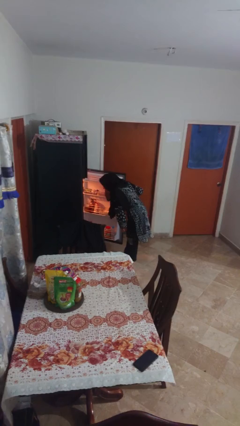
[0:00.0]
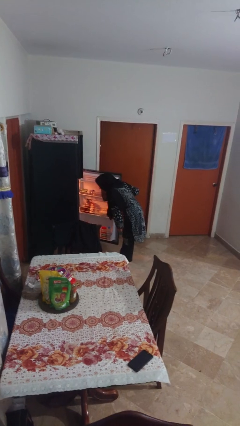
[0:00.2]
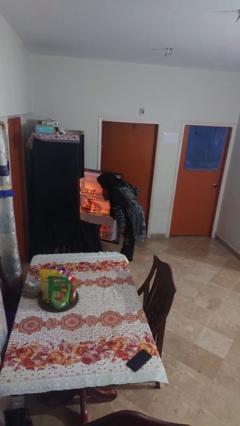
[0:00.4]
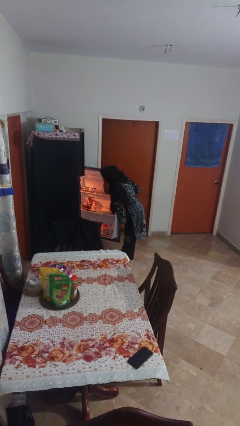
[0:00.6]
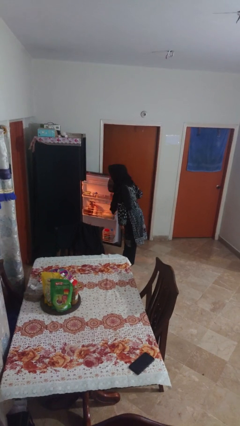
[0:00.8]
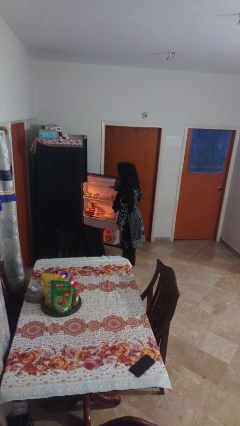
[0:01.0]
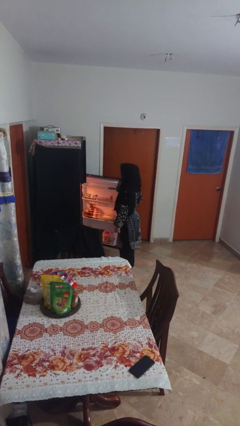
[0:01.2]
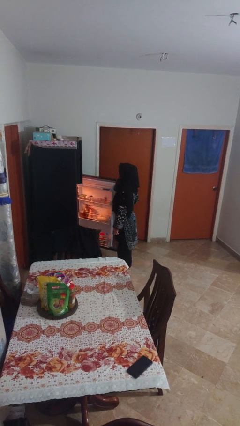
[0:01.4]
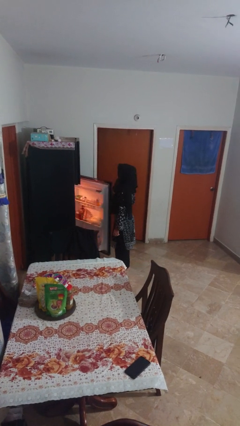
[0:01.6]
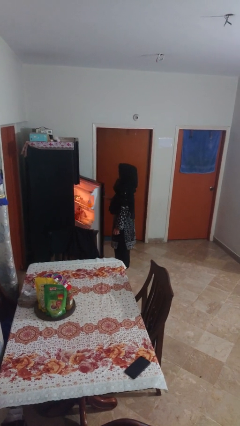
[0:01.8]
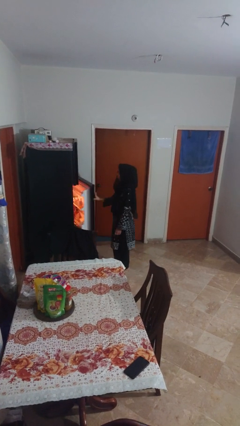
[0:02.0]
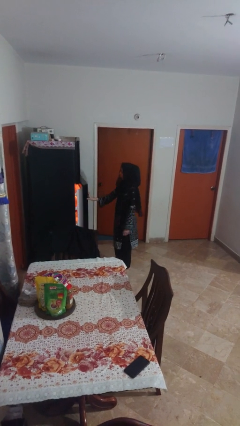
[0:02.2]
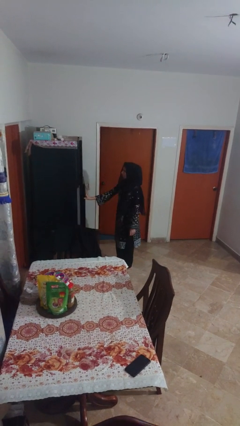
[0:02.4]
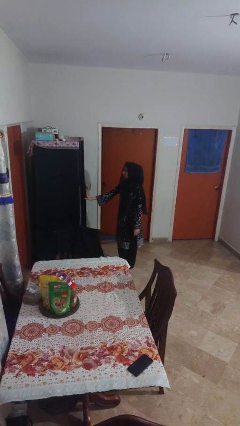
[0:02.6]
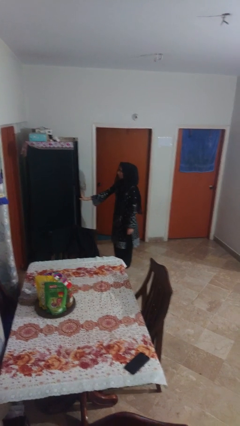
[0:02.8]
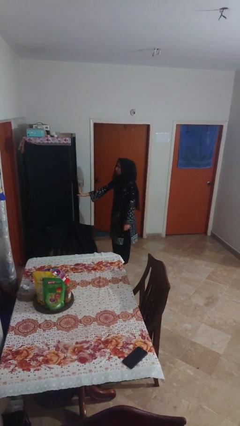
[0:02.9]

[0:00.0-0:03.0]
person closes refrigerator

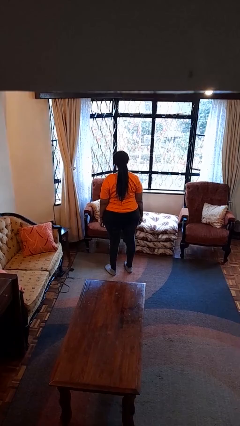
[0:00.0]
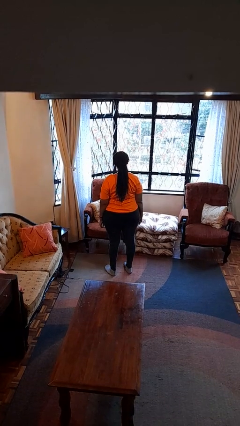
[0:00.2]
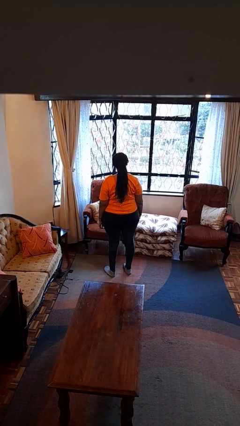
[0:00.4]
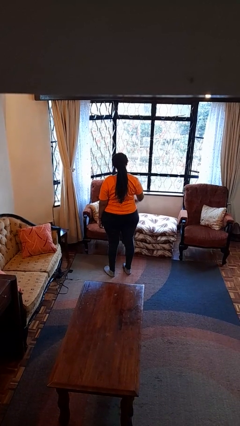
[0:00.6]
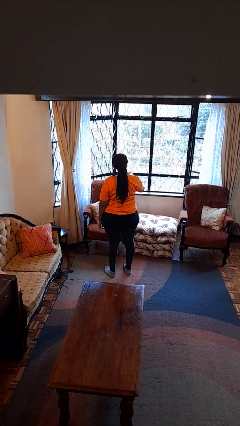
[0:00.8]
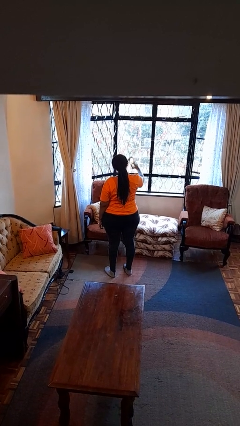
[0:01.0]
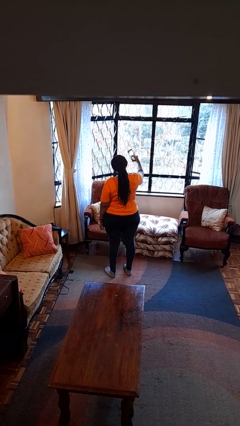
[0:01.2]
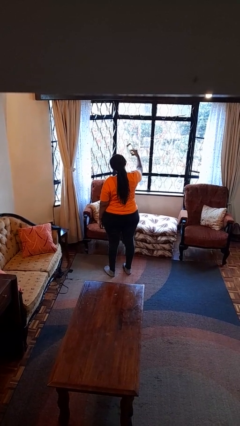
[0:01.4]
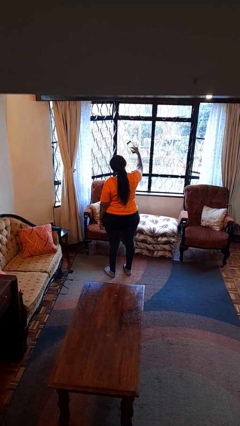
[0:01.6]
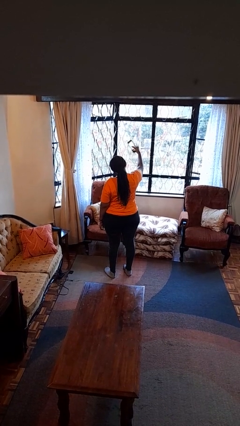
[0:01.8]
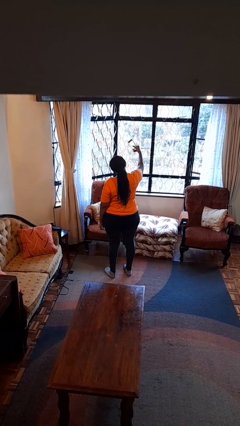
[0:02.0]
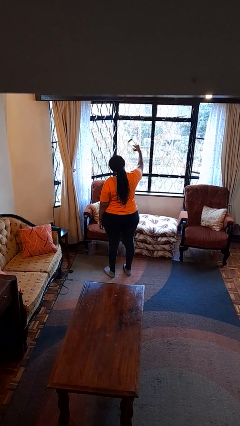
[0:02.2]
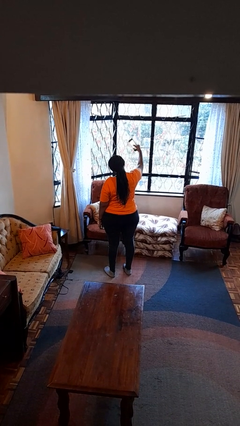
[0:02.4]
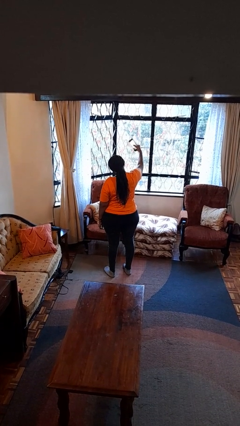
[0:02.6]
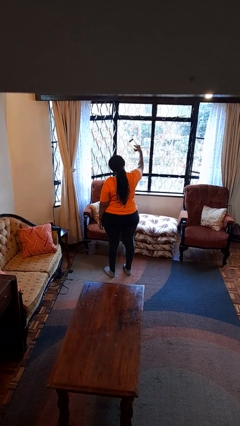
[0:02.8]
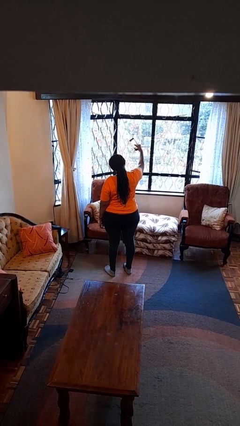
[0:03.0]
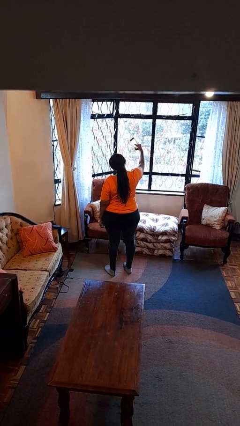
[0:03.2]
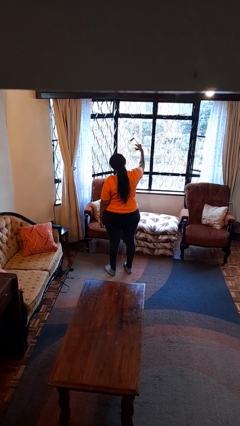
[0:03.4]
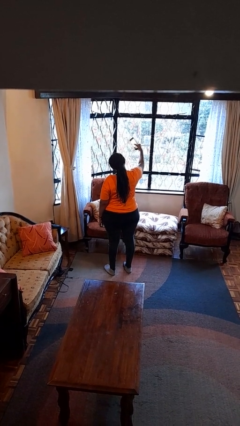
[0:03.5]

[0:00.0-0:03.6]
person takes selfie

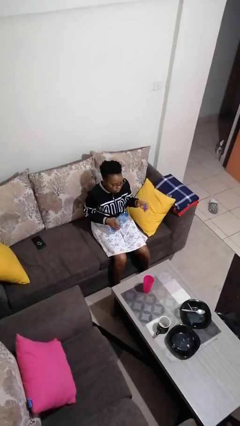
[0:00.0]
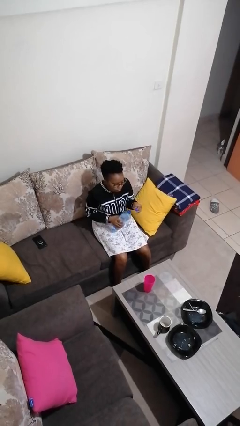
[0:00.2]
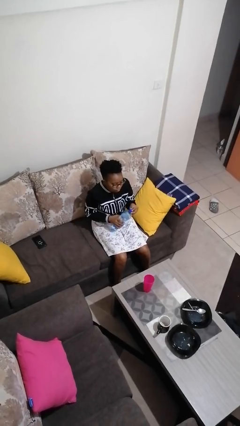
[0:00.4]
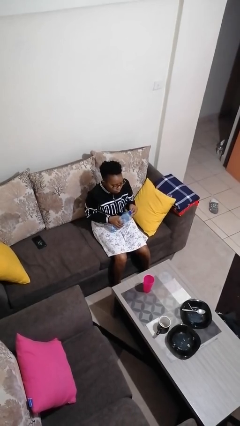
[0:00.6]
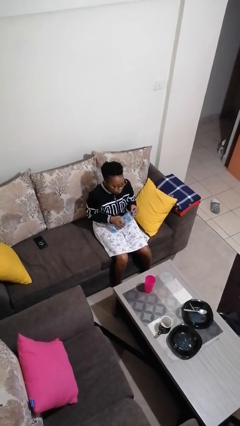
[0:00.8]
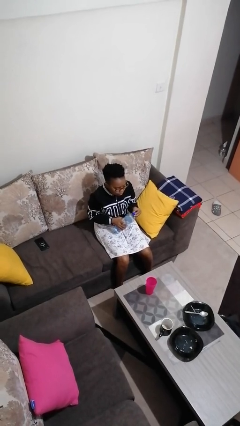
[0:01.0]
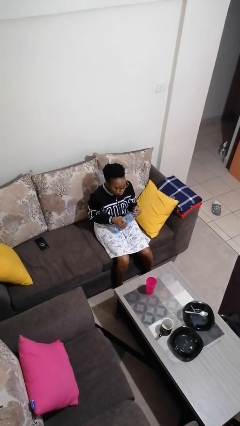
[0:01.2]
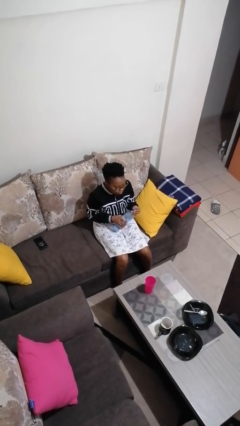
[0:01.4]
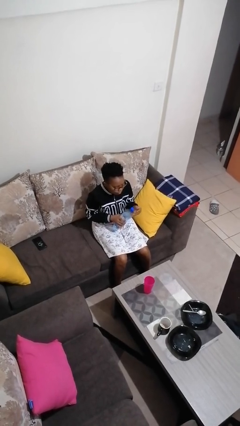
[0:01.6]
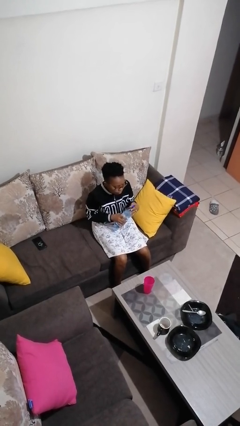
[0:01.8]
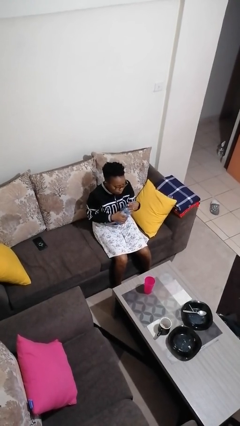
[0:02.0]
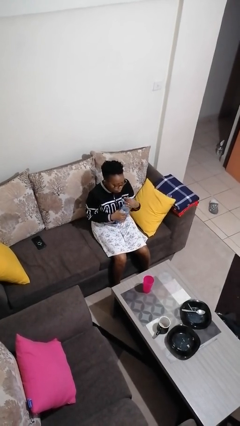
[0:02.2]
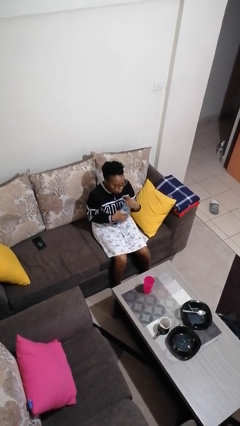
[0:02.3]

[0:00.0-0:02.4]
person screws lid to bottle

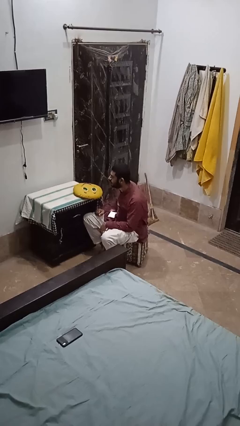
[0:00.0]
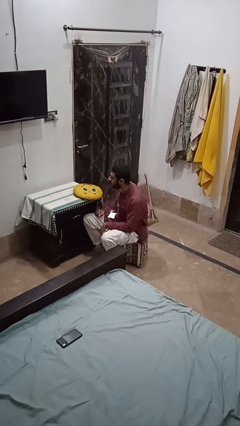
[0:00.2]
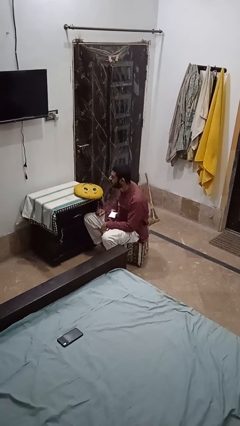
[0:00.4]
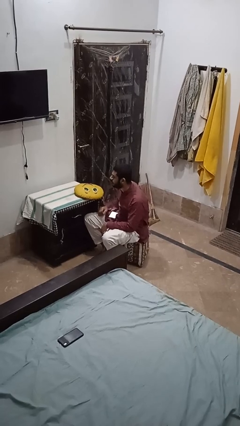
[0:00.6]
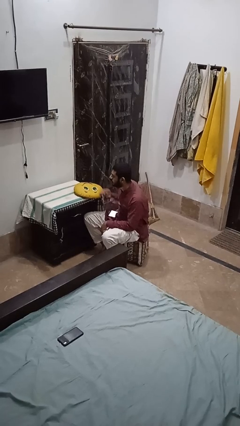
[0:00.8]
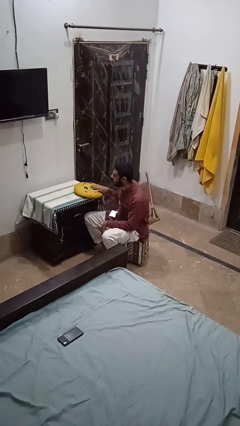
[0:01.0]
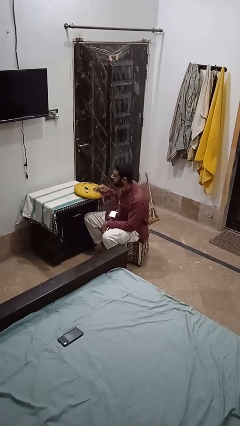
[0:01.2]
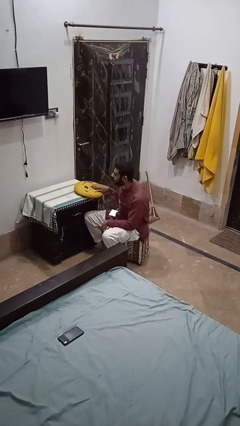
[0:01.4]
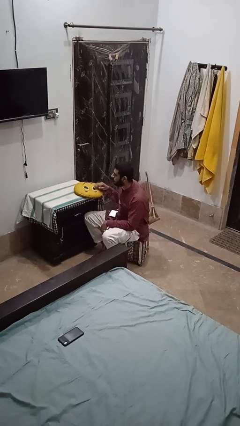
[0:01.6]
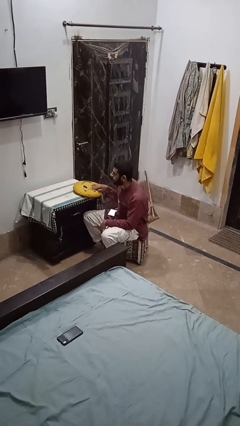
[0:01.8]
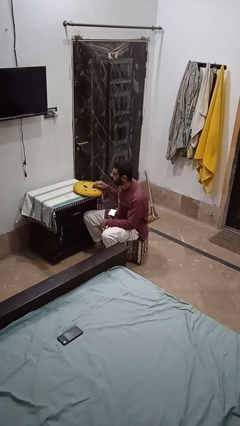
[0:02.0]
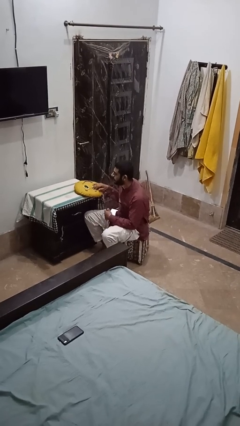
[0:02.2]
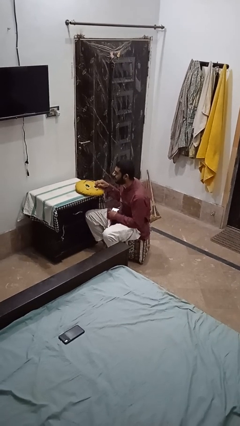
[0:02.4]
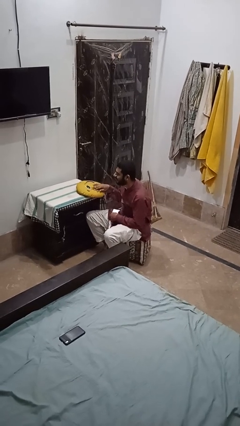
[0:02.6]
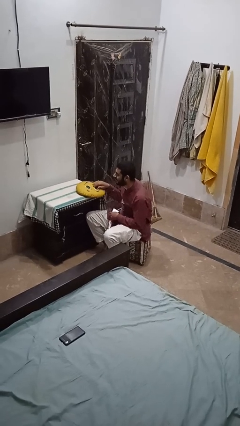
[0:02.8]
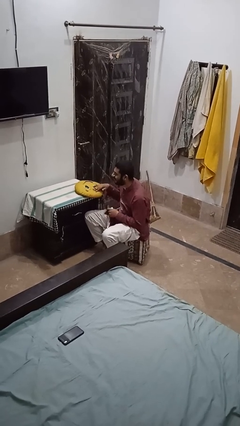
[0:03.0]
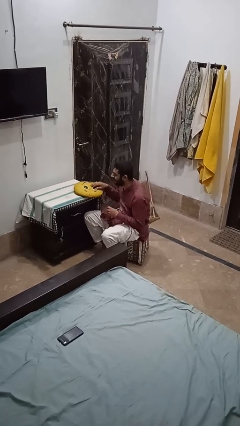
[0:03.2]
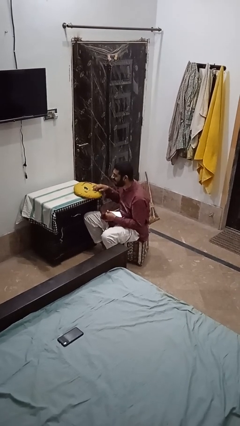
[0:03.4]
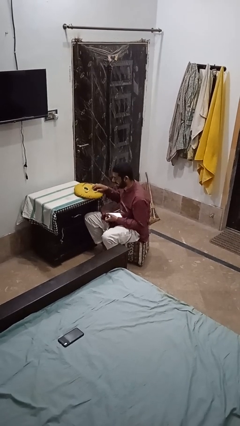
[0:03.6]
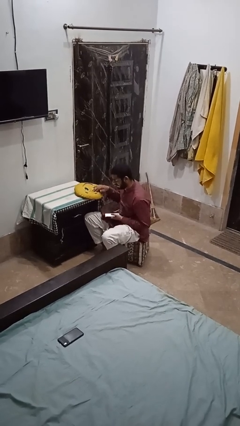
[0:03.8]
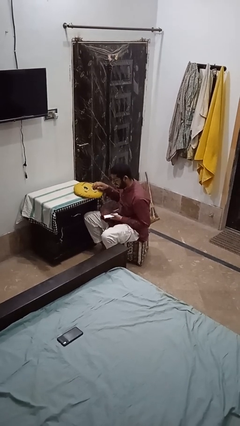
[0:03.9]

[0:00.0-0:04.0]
person waves hand over object

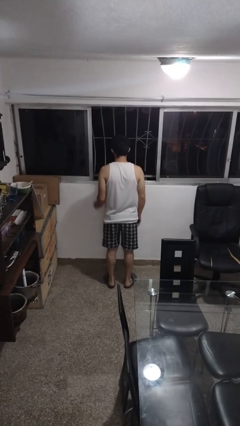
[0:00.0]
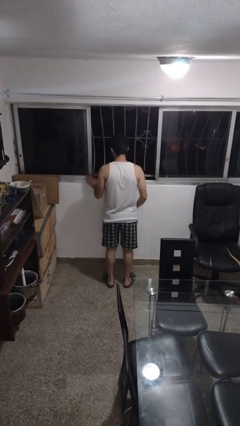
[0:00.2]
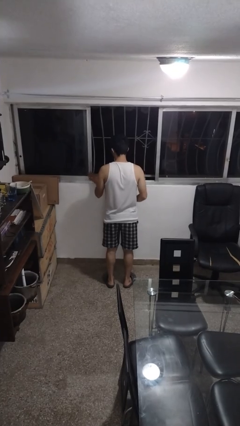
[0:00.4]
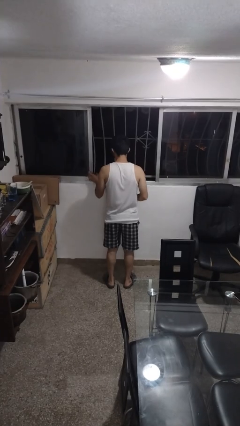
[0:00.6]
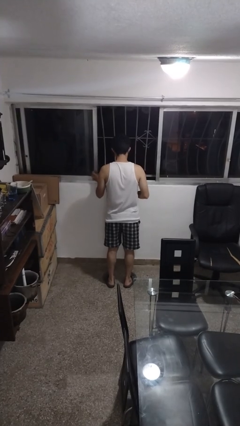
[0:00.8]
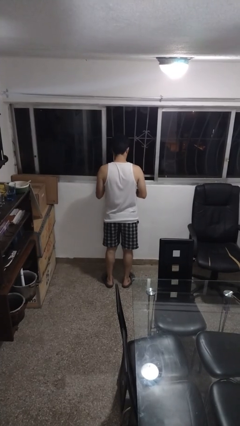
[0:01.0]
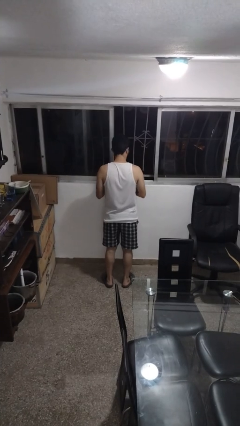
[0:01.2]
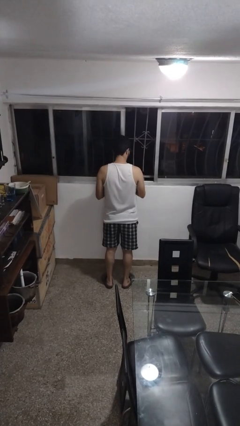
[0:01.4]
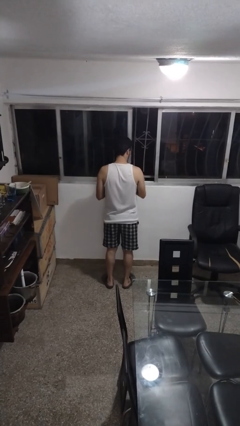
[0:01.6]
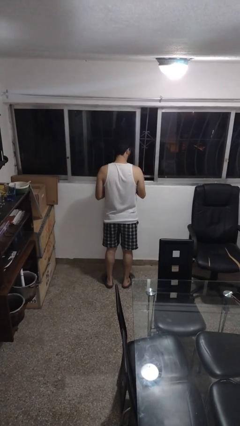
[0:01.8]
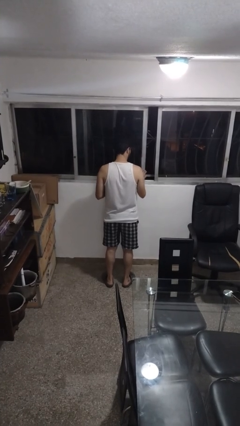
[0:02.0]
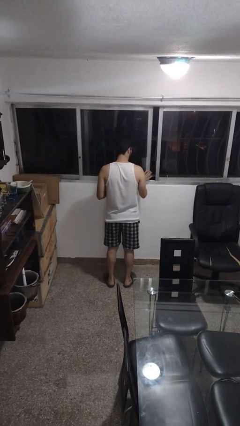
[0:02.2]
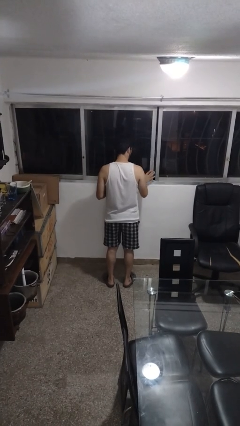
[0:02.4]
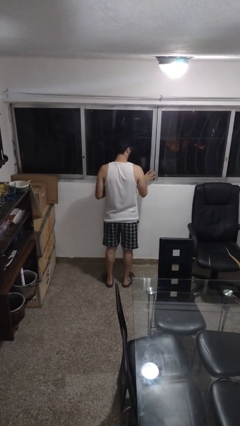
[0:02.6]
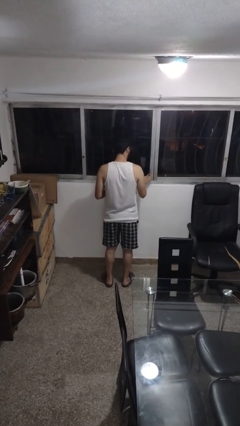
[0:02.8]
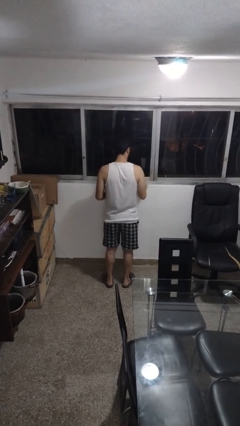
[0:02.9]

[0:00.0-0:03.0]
person closes home window

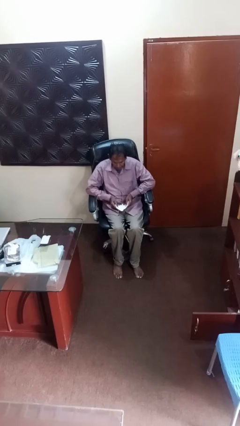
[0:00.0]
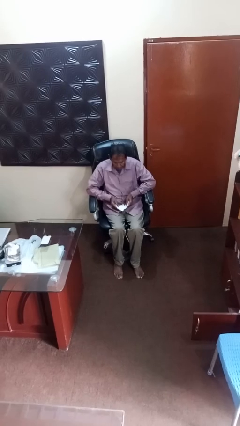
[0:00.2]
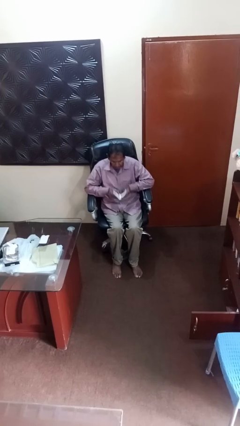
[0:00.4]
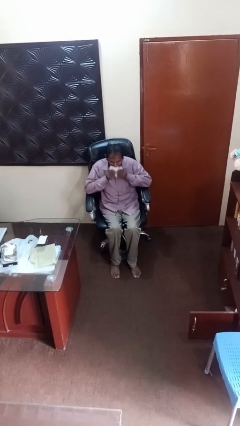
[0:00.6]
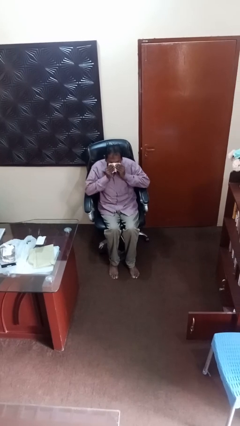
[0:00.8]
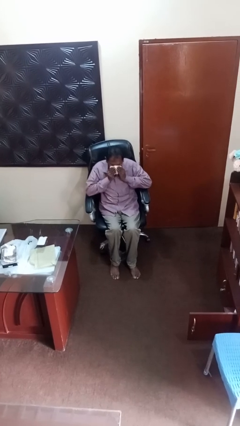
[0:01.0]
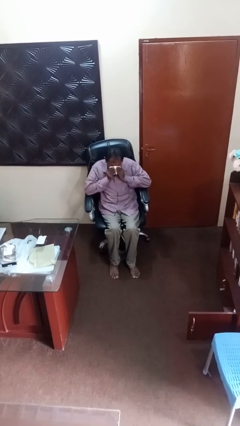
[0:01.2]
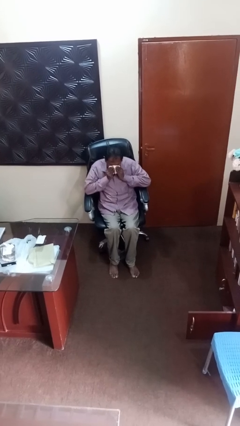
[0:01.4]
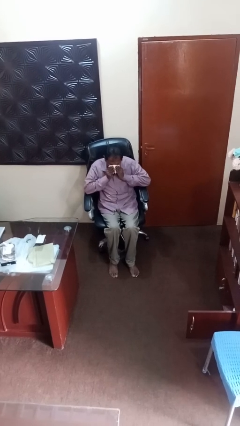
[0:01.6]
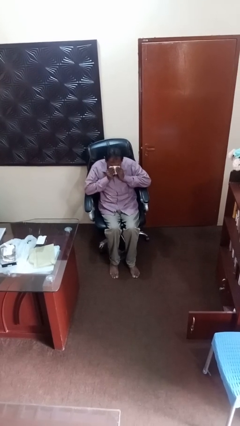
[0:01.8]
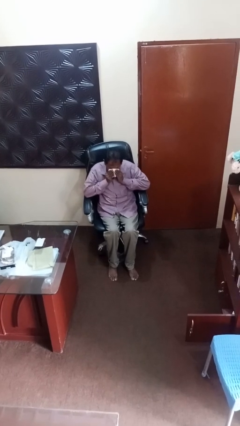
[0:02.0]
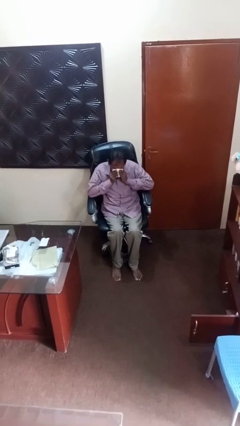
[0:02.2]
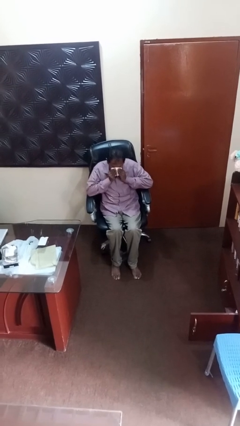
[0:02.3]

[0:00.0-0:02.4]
person blows nose
